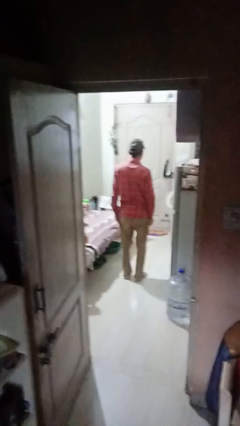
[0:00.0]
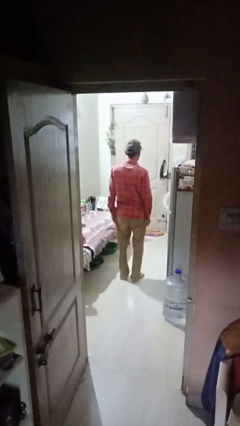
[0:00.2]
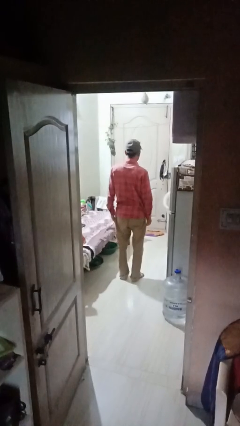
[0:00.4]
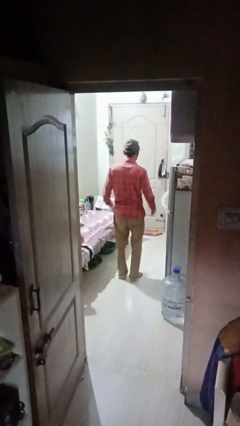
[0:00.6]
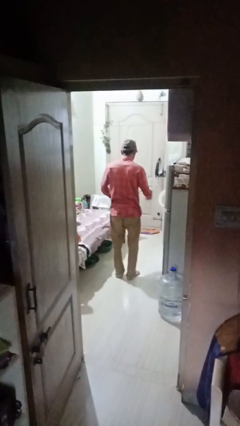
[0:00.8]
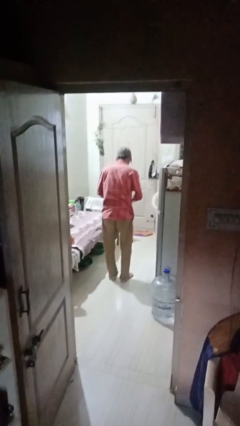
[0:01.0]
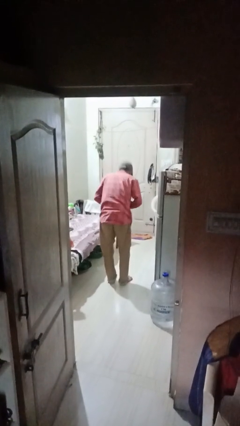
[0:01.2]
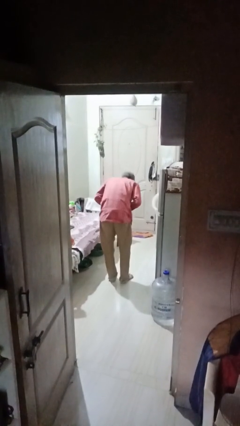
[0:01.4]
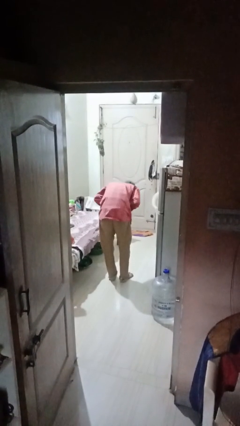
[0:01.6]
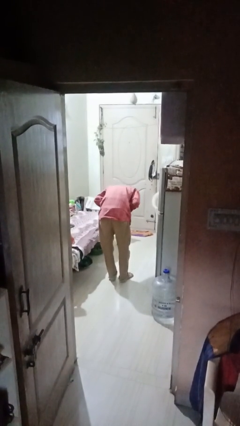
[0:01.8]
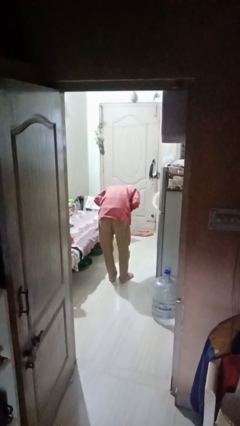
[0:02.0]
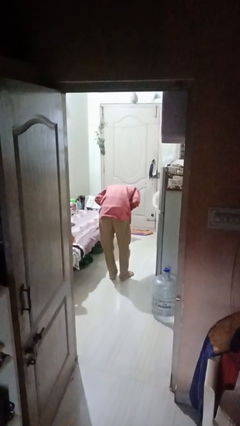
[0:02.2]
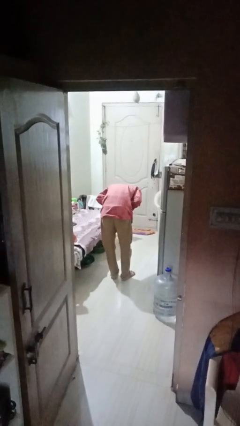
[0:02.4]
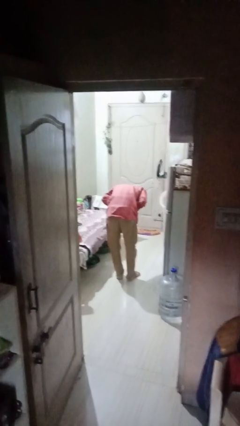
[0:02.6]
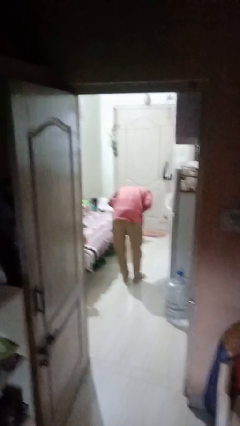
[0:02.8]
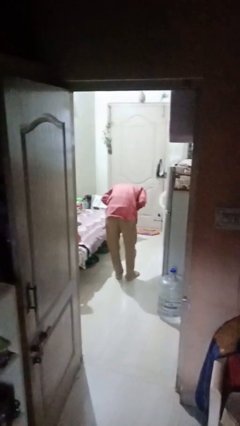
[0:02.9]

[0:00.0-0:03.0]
person bows

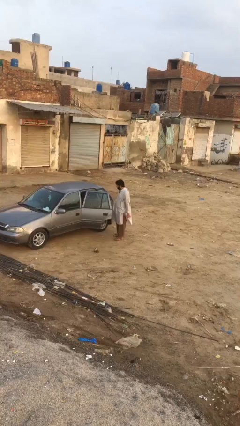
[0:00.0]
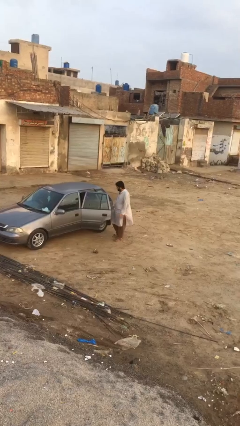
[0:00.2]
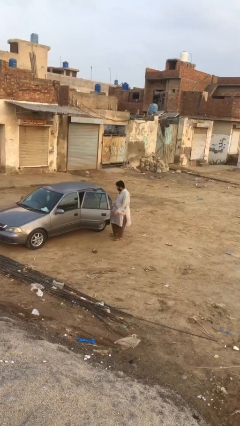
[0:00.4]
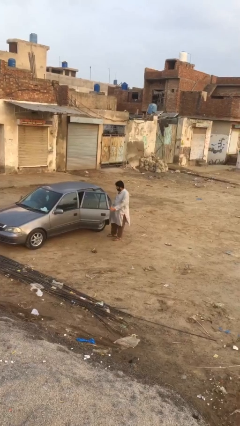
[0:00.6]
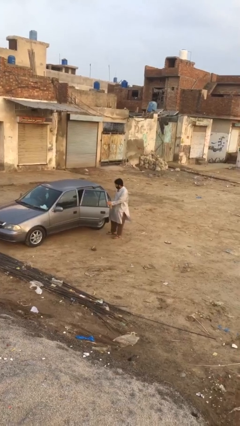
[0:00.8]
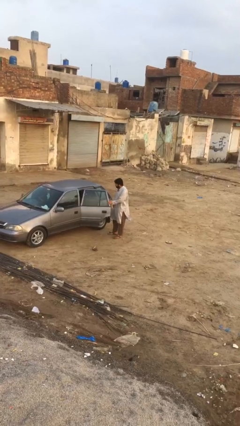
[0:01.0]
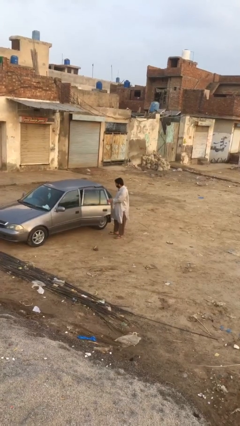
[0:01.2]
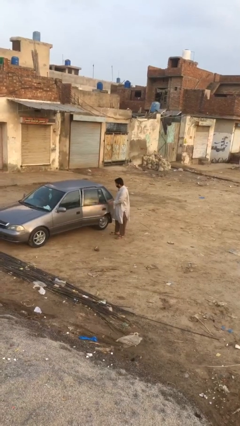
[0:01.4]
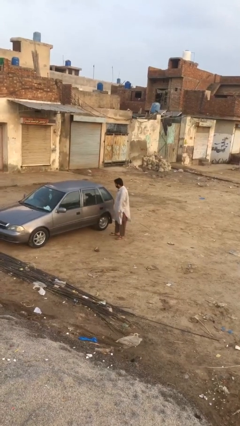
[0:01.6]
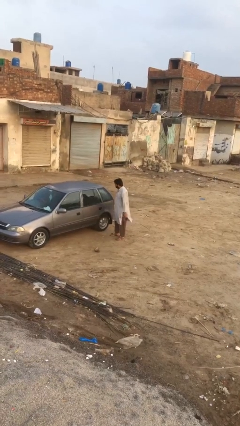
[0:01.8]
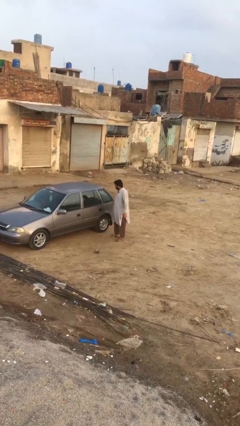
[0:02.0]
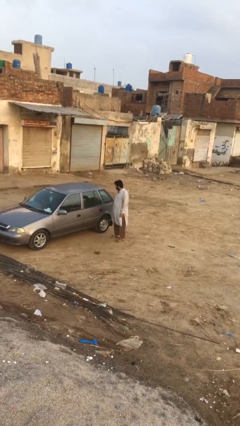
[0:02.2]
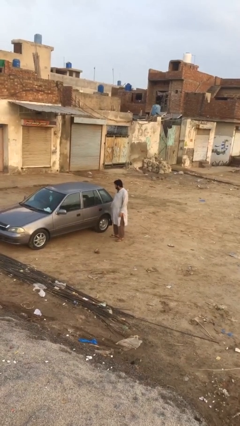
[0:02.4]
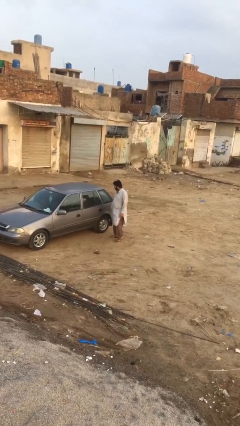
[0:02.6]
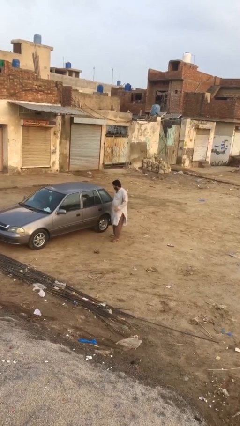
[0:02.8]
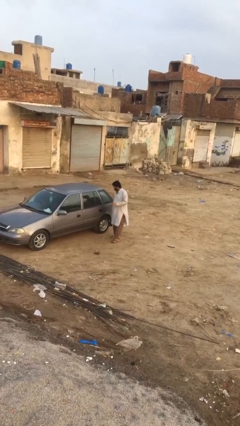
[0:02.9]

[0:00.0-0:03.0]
person closes car door

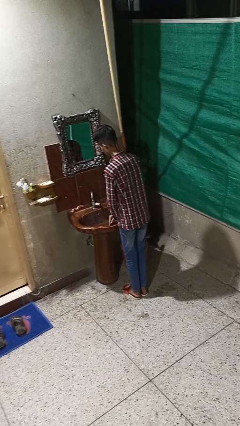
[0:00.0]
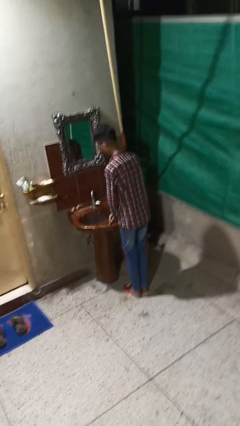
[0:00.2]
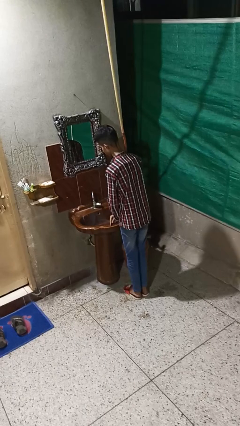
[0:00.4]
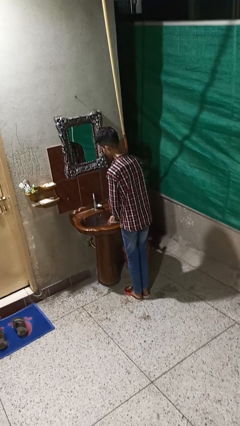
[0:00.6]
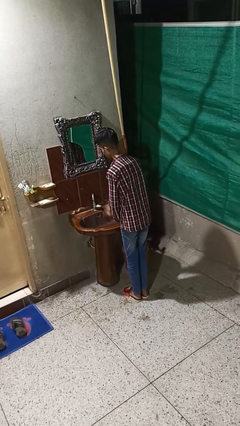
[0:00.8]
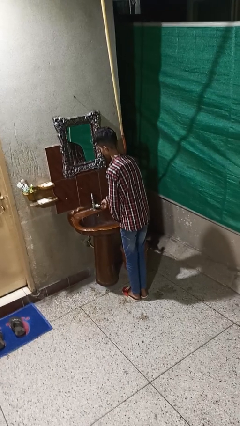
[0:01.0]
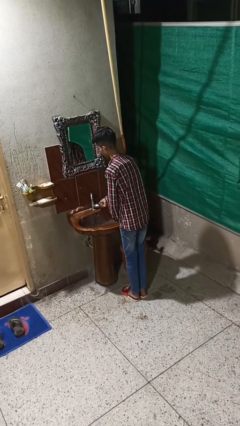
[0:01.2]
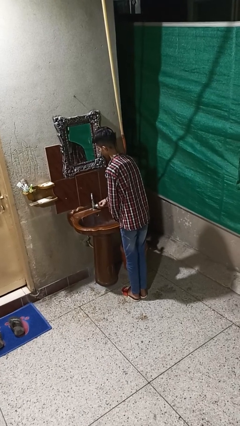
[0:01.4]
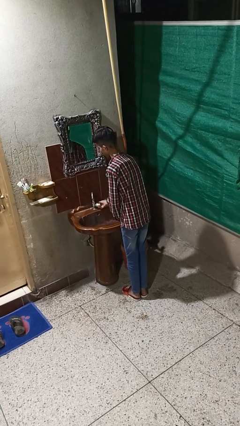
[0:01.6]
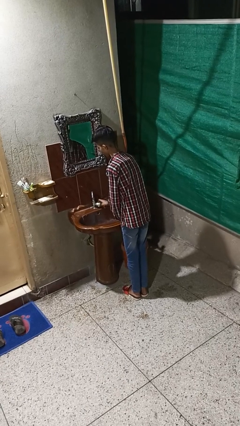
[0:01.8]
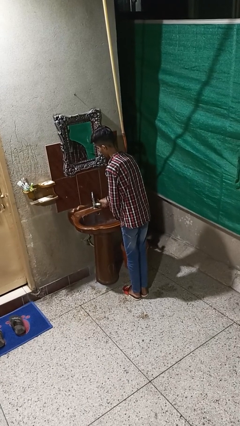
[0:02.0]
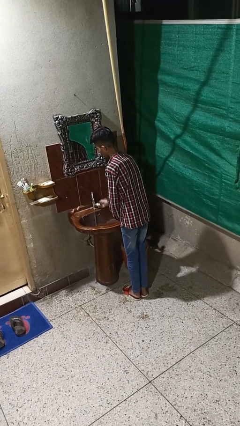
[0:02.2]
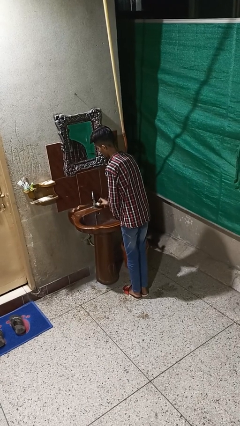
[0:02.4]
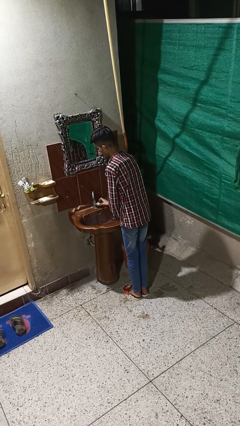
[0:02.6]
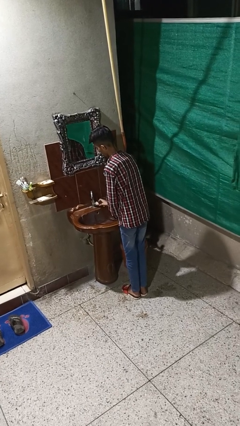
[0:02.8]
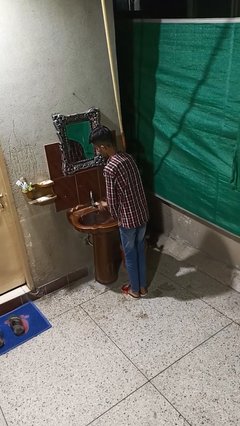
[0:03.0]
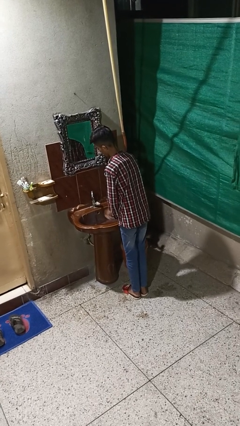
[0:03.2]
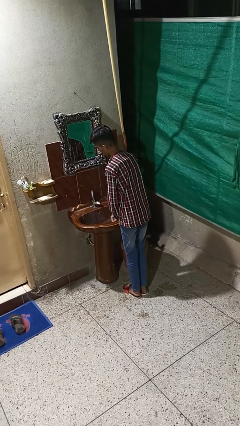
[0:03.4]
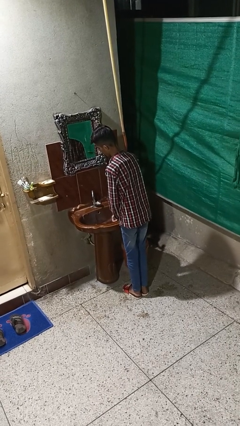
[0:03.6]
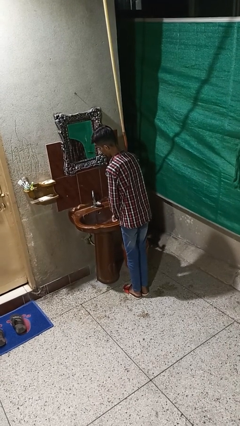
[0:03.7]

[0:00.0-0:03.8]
person turns on faucet

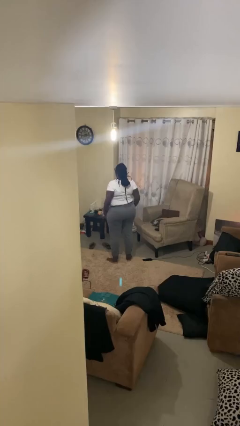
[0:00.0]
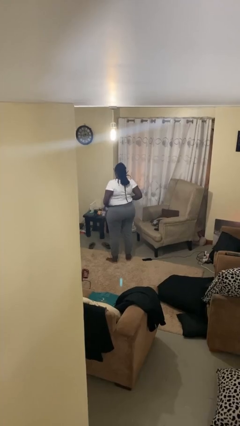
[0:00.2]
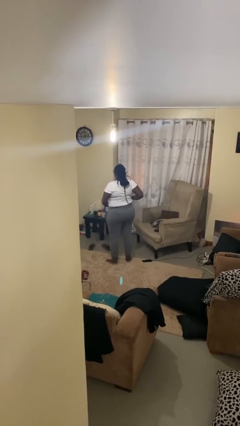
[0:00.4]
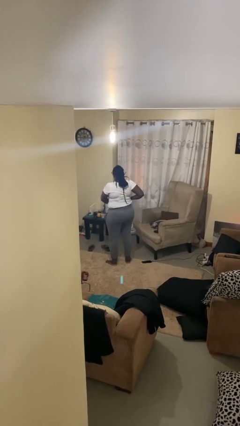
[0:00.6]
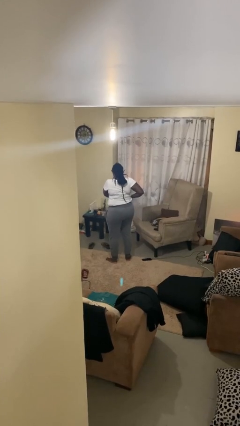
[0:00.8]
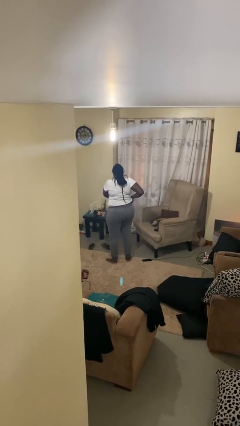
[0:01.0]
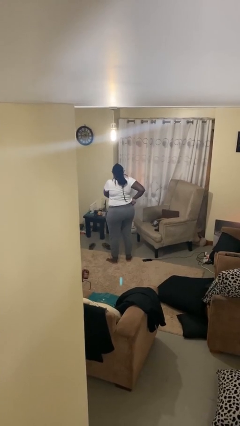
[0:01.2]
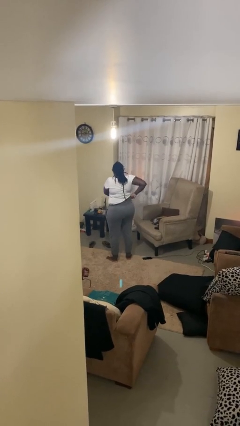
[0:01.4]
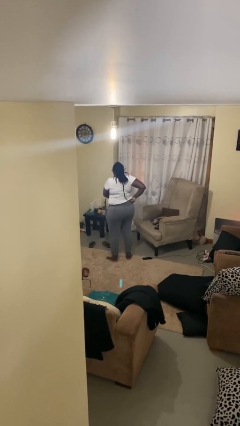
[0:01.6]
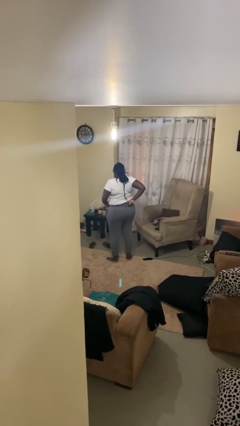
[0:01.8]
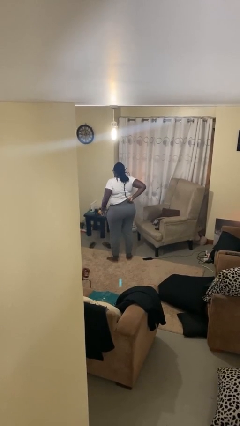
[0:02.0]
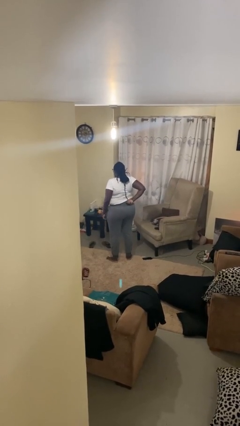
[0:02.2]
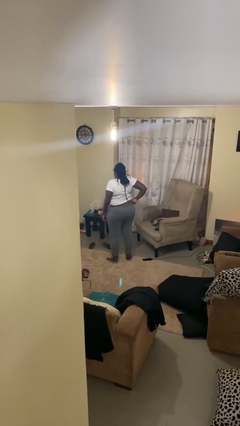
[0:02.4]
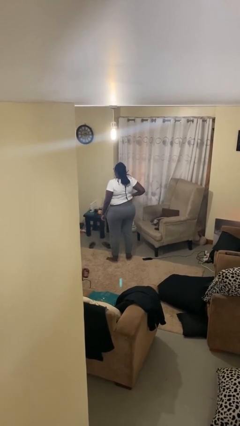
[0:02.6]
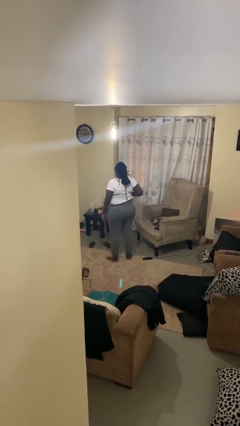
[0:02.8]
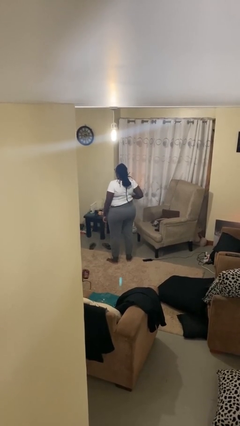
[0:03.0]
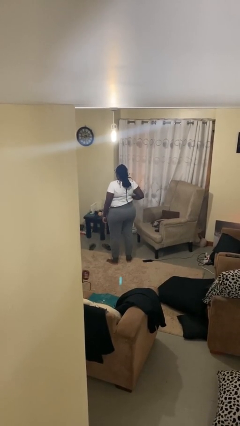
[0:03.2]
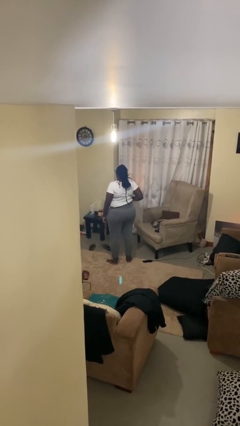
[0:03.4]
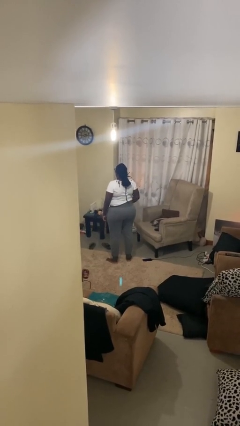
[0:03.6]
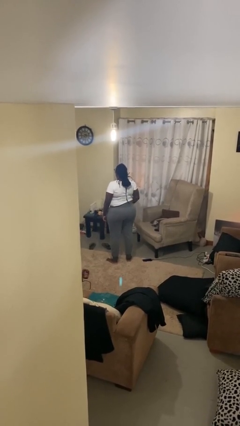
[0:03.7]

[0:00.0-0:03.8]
person hikes up pants

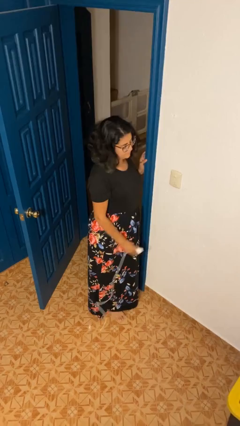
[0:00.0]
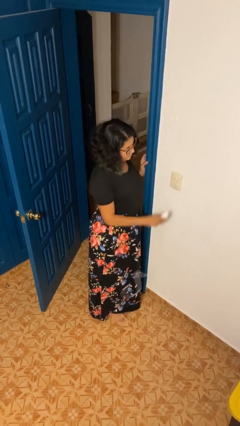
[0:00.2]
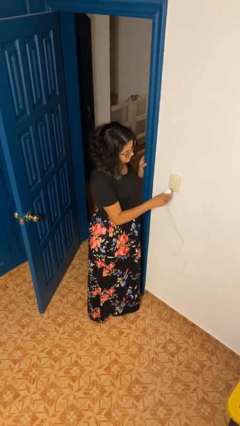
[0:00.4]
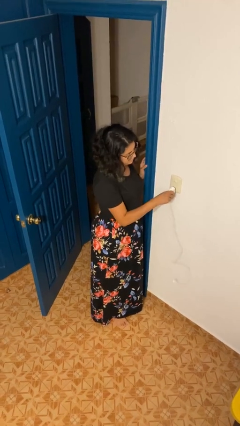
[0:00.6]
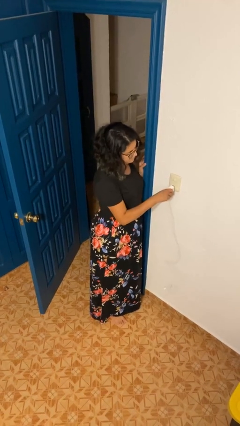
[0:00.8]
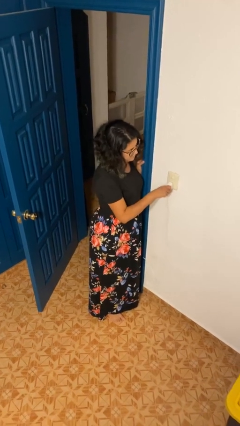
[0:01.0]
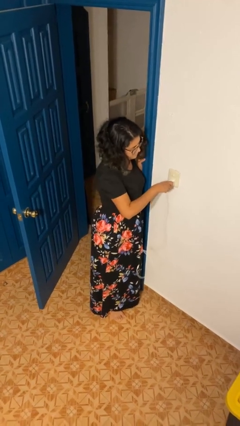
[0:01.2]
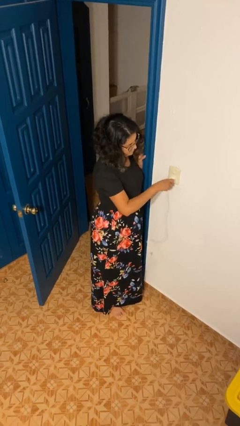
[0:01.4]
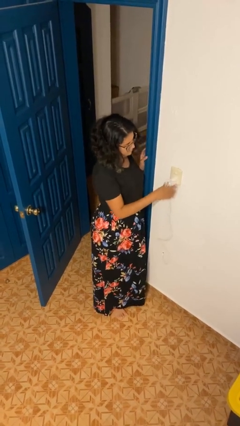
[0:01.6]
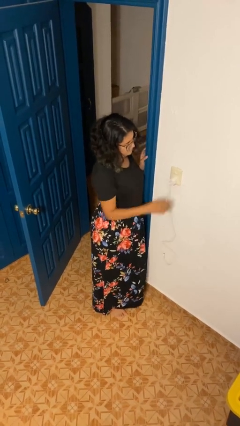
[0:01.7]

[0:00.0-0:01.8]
person plugs into electrical socket

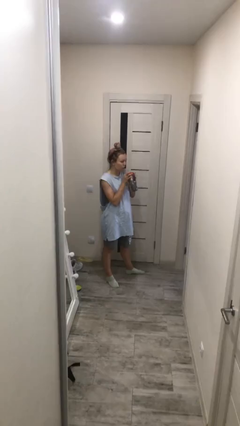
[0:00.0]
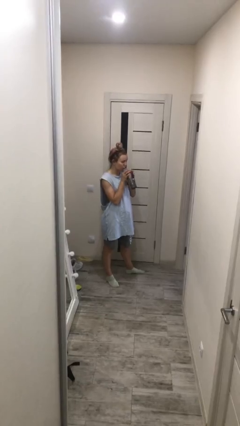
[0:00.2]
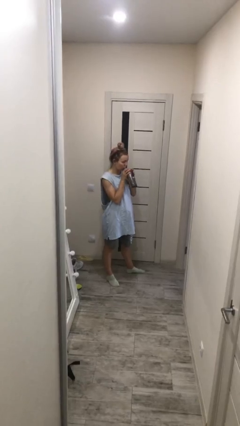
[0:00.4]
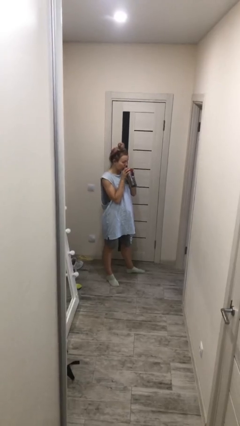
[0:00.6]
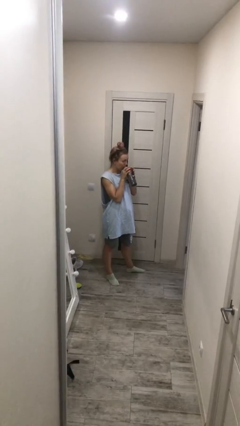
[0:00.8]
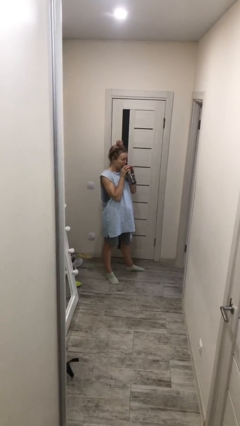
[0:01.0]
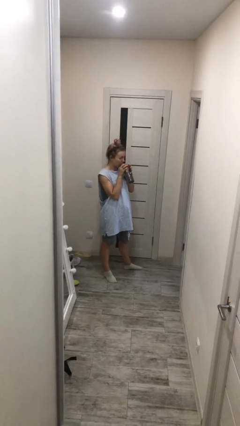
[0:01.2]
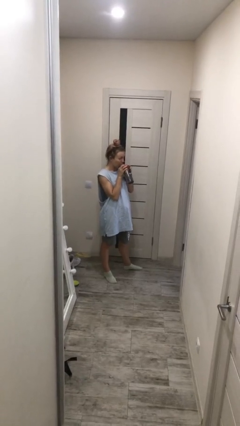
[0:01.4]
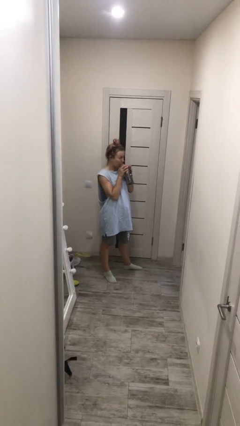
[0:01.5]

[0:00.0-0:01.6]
person drinks from straw

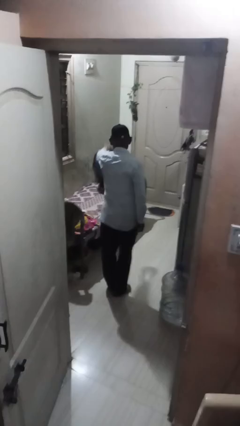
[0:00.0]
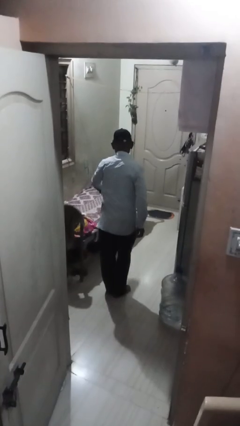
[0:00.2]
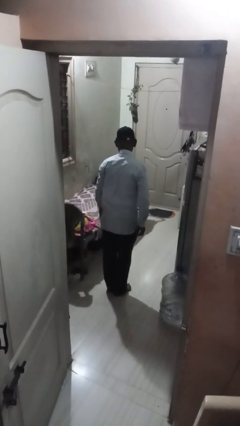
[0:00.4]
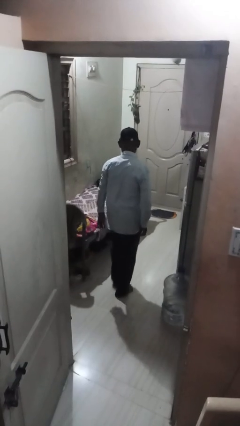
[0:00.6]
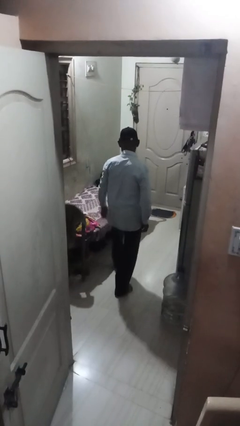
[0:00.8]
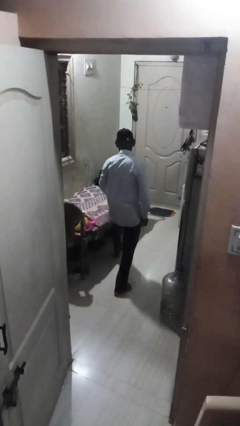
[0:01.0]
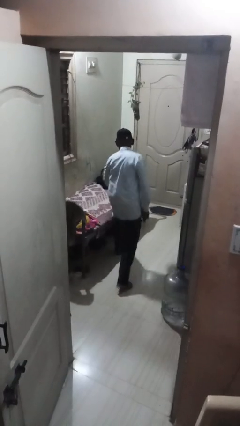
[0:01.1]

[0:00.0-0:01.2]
person throws object on bed
